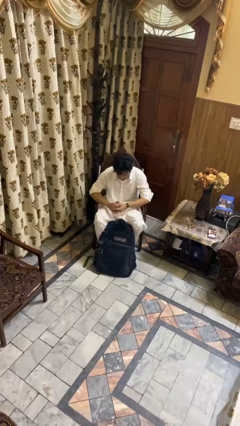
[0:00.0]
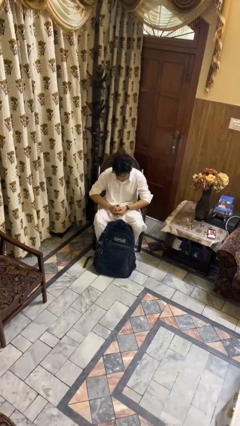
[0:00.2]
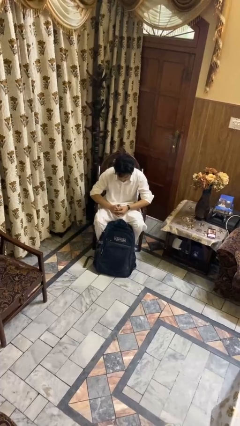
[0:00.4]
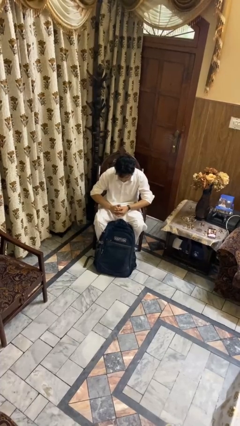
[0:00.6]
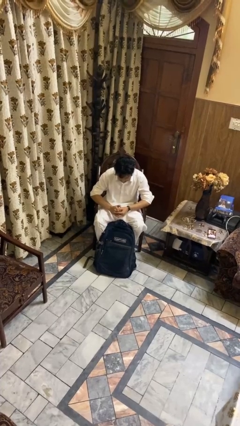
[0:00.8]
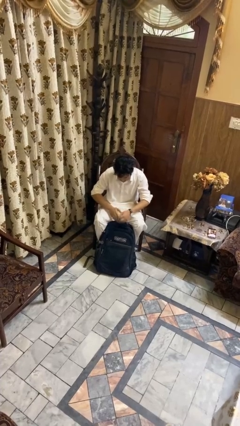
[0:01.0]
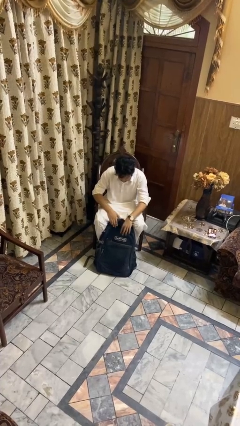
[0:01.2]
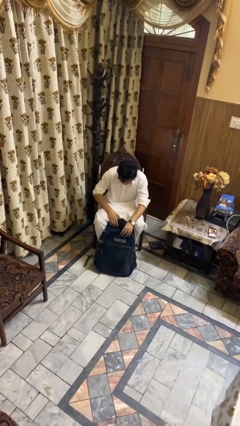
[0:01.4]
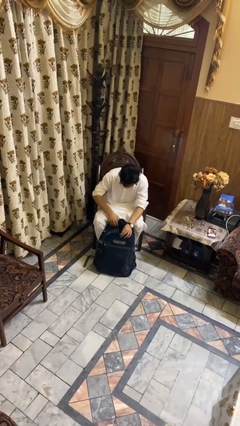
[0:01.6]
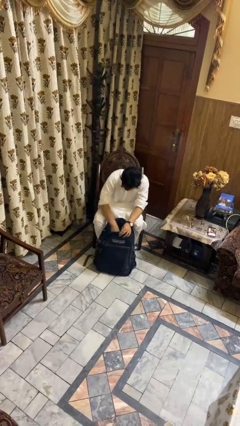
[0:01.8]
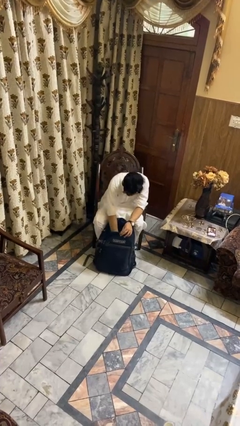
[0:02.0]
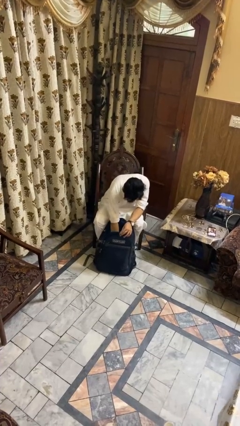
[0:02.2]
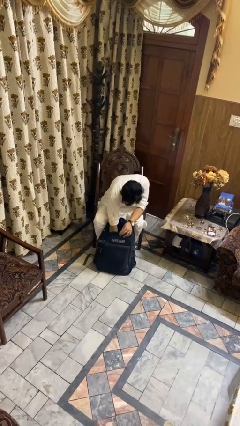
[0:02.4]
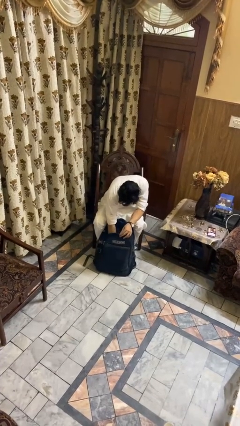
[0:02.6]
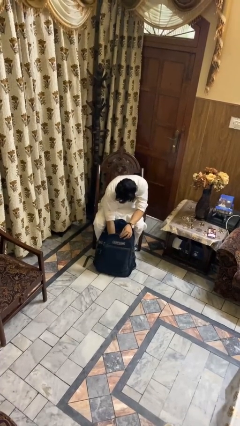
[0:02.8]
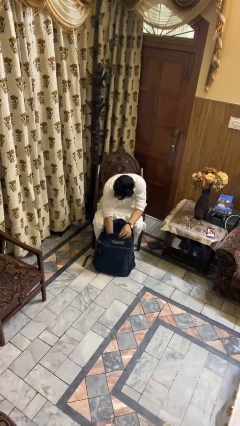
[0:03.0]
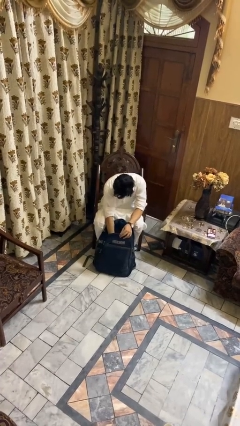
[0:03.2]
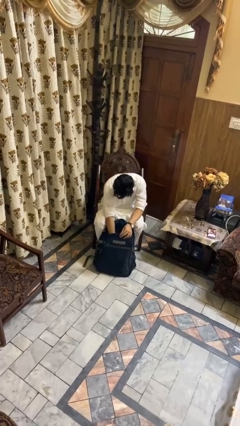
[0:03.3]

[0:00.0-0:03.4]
person searches in backpack

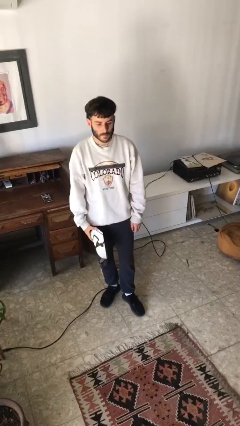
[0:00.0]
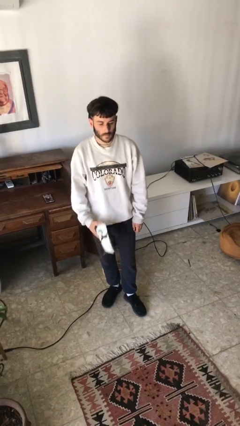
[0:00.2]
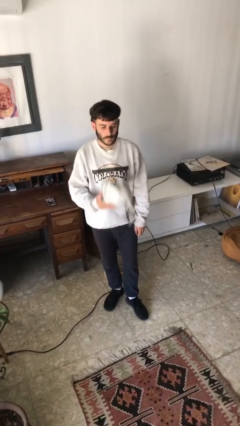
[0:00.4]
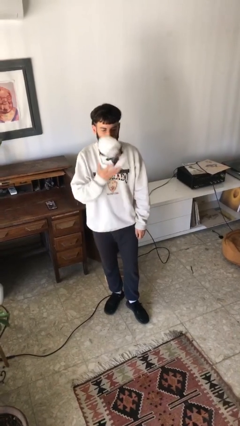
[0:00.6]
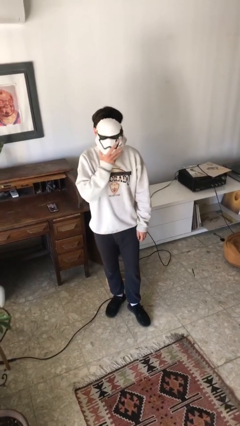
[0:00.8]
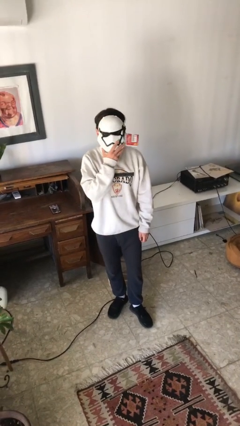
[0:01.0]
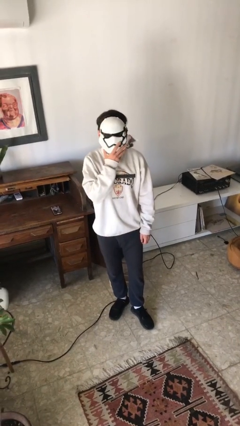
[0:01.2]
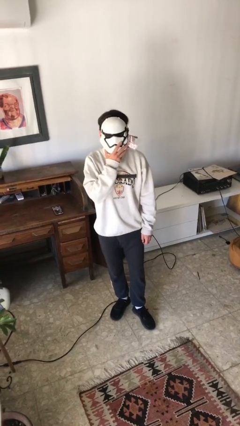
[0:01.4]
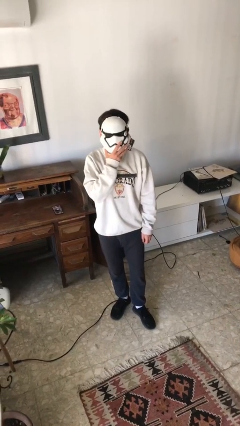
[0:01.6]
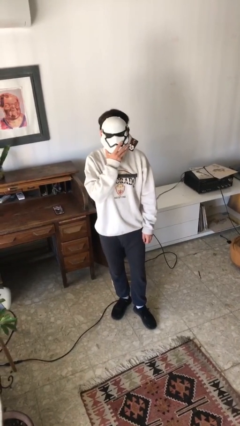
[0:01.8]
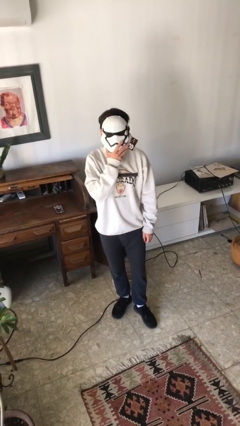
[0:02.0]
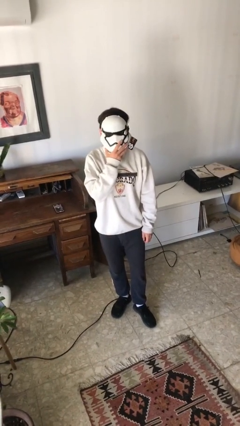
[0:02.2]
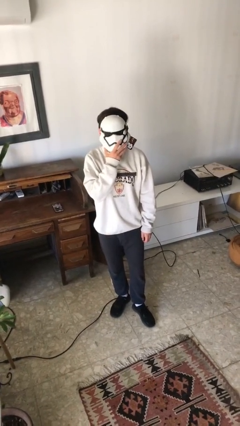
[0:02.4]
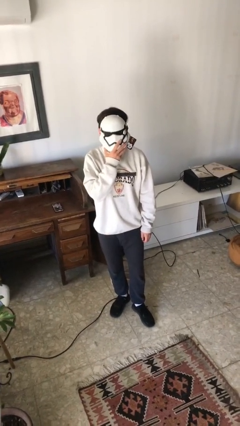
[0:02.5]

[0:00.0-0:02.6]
person puts on facemask

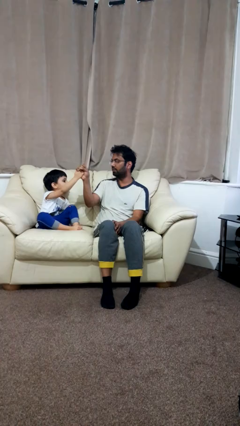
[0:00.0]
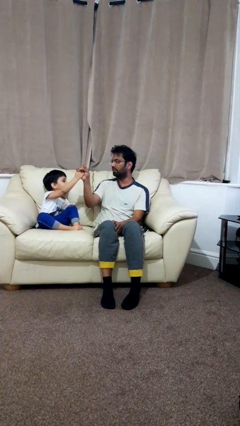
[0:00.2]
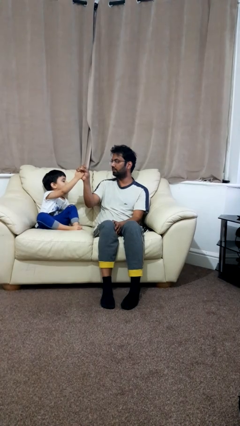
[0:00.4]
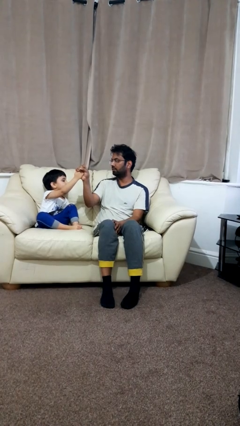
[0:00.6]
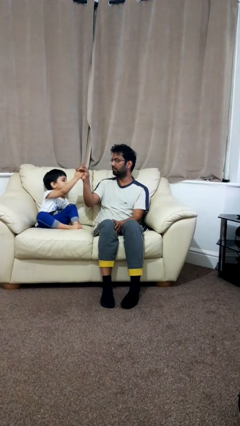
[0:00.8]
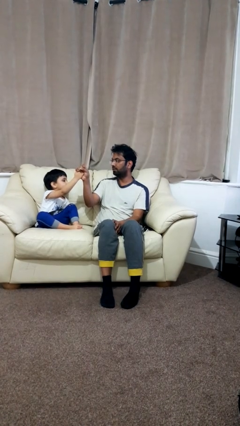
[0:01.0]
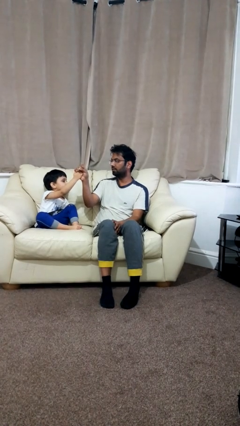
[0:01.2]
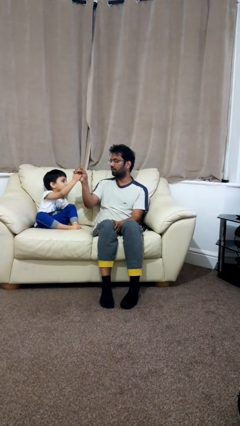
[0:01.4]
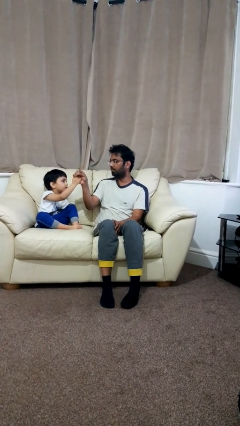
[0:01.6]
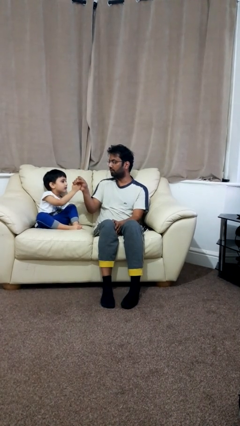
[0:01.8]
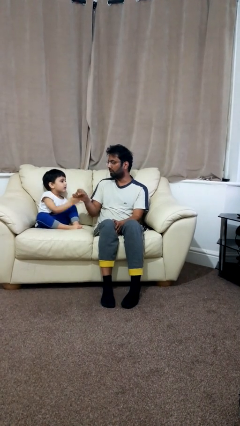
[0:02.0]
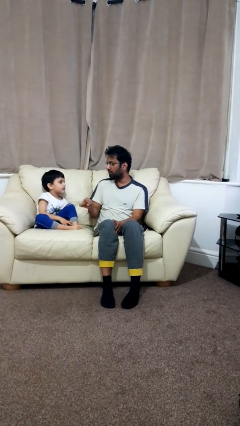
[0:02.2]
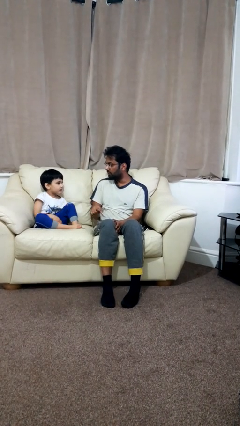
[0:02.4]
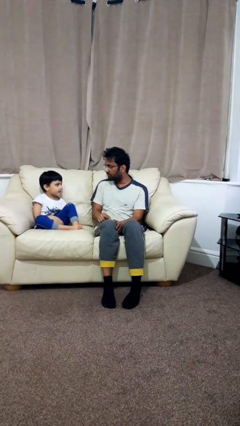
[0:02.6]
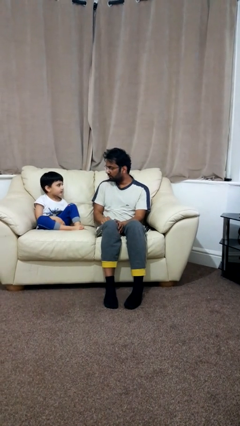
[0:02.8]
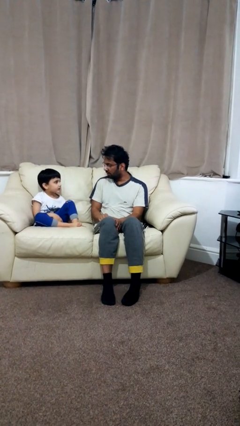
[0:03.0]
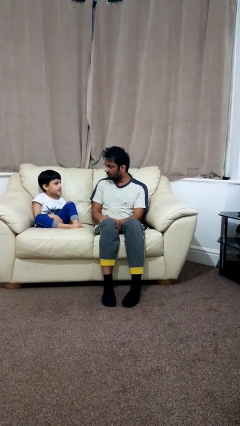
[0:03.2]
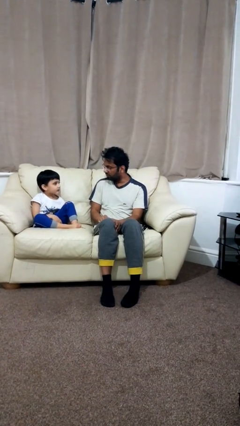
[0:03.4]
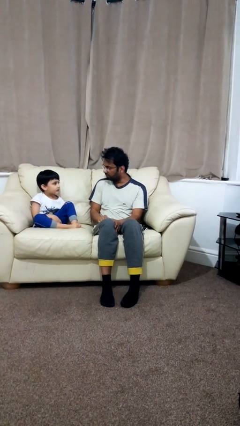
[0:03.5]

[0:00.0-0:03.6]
person highfives hand

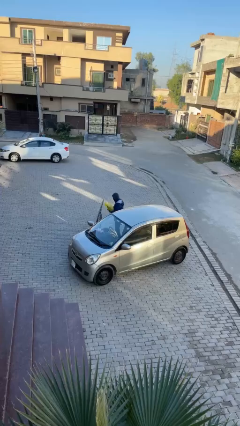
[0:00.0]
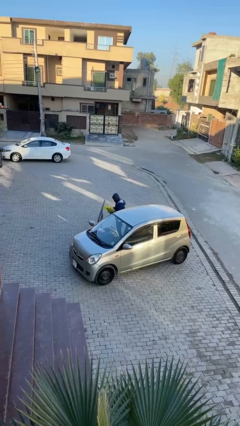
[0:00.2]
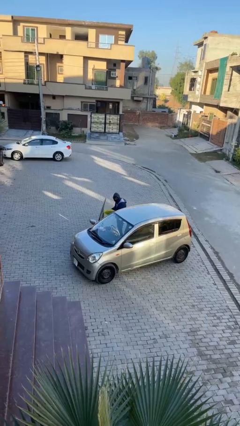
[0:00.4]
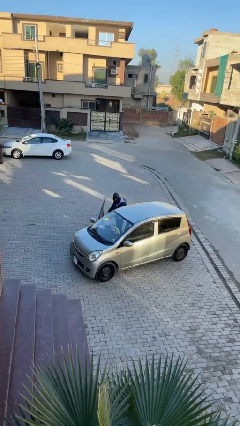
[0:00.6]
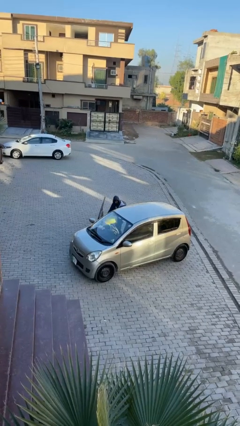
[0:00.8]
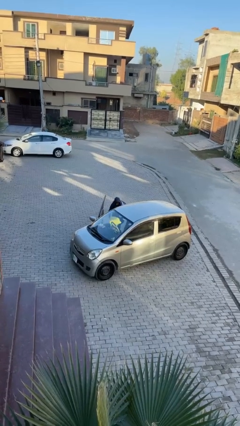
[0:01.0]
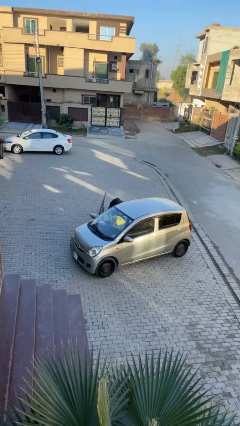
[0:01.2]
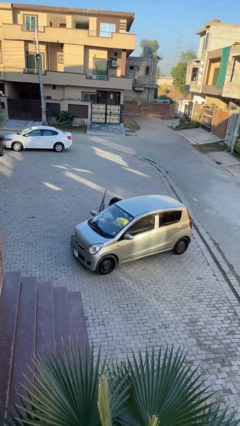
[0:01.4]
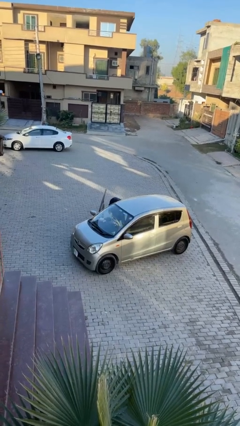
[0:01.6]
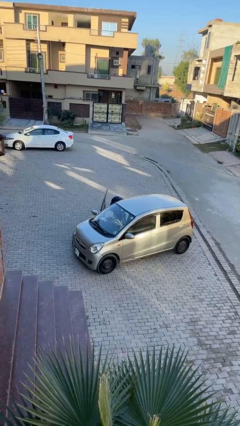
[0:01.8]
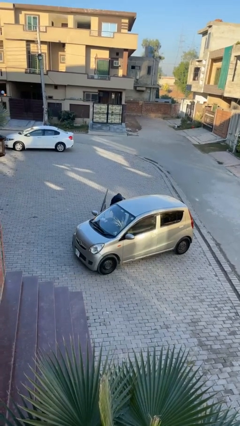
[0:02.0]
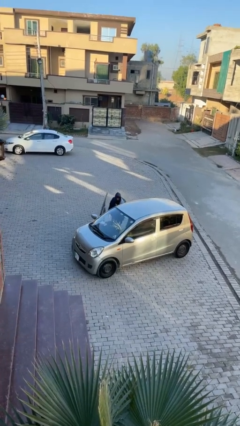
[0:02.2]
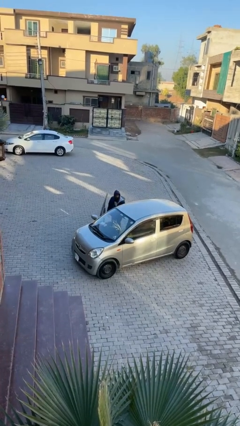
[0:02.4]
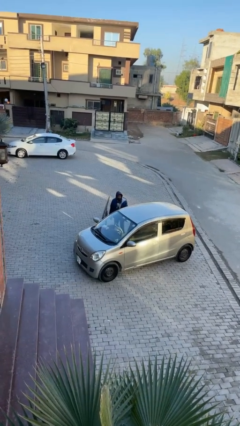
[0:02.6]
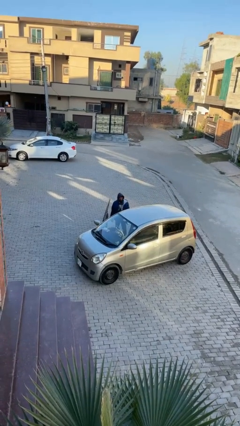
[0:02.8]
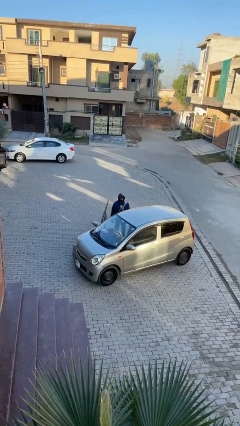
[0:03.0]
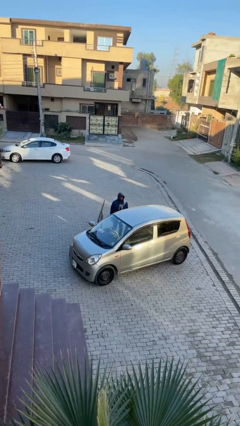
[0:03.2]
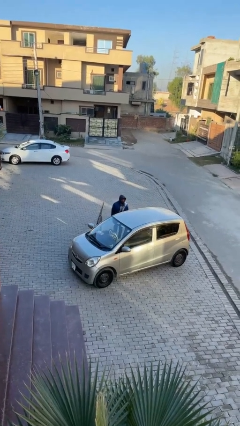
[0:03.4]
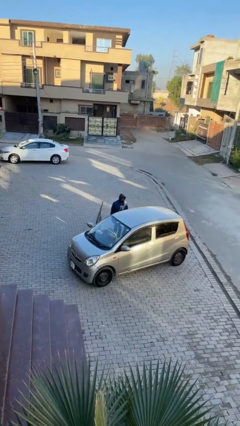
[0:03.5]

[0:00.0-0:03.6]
person loads car

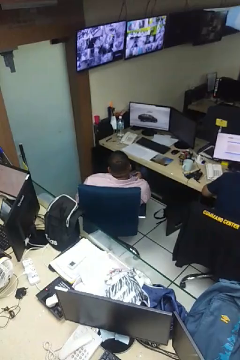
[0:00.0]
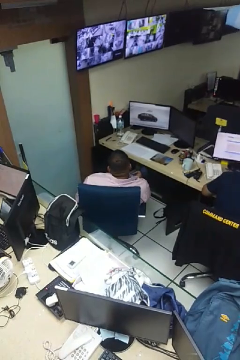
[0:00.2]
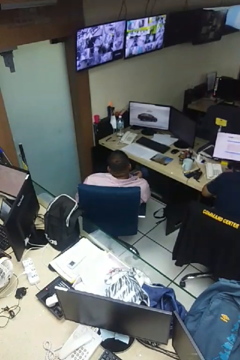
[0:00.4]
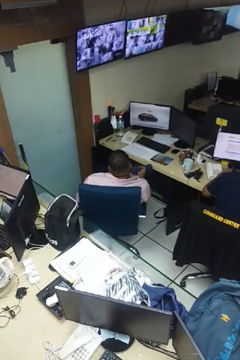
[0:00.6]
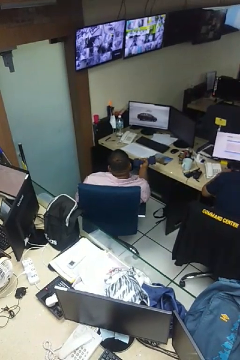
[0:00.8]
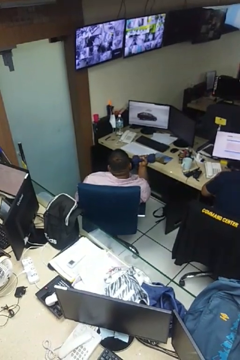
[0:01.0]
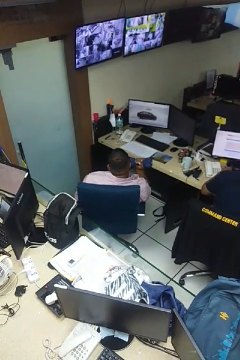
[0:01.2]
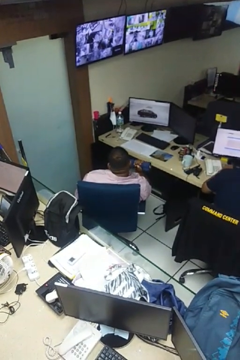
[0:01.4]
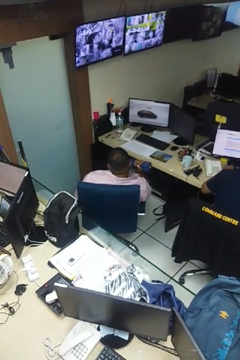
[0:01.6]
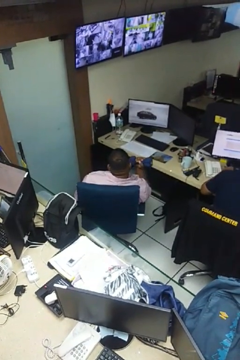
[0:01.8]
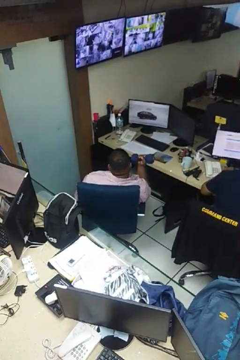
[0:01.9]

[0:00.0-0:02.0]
person lifts dumbbells

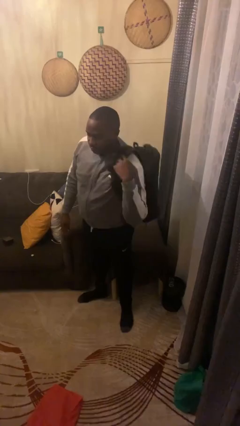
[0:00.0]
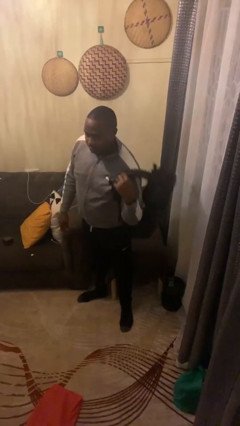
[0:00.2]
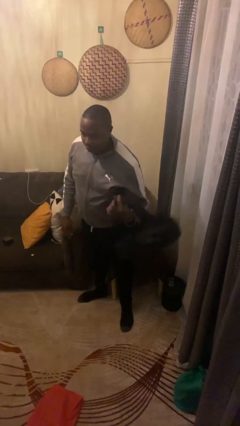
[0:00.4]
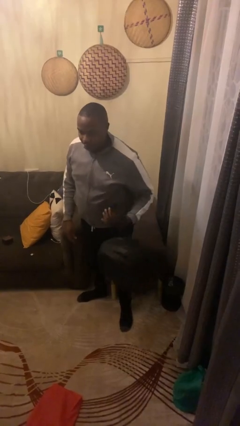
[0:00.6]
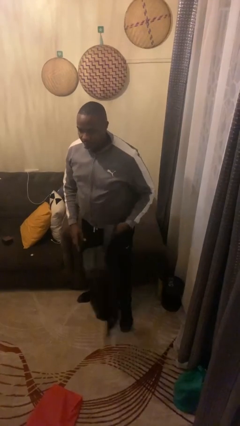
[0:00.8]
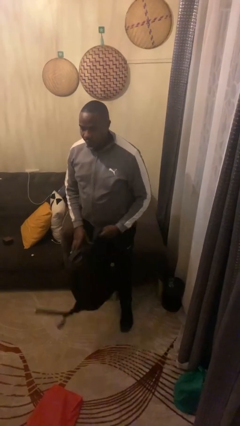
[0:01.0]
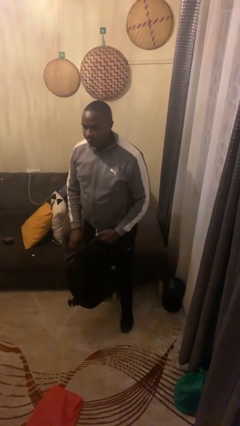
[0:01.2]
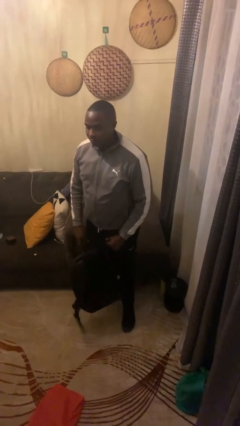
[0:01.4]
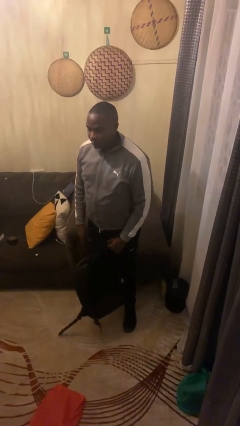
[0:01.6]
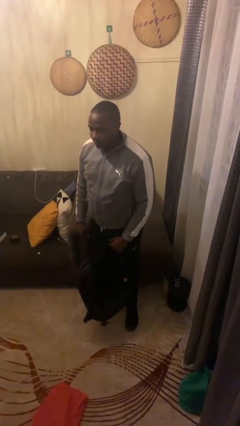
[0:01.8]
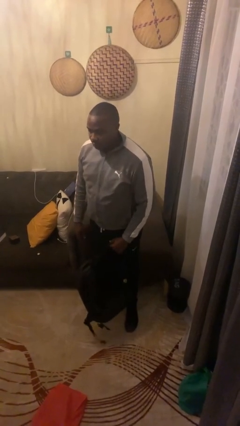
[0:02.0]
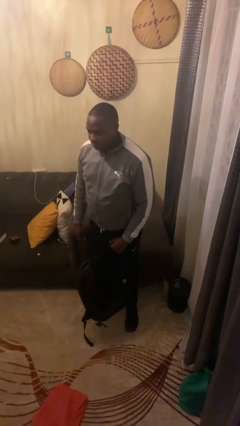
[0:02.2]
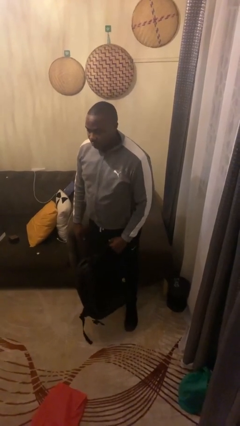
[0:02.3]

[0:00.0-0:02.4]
person takes off backpack
